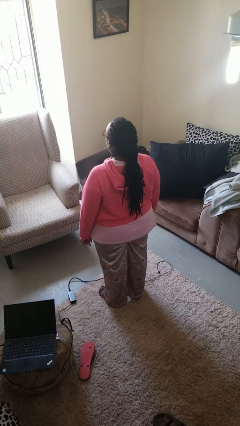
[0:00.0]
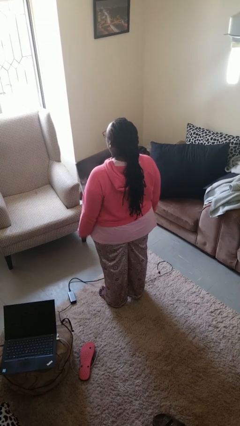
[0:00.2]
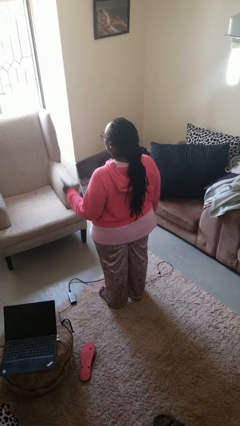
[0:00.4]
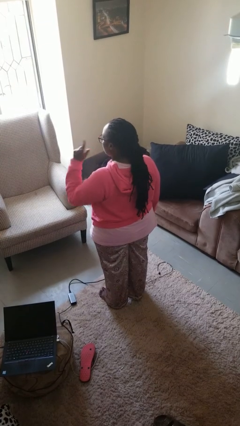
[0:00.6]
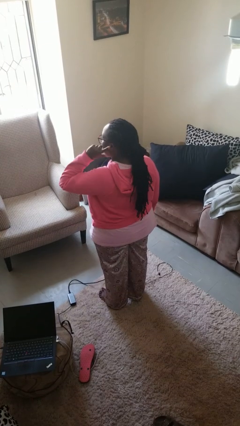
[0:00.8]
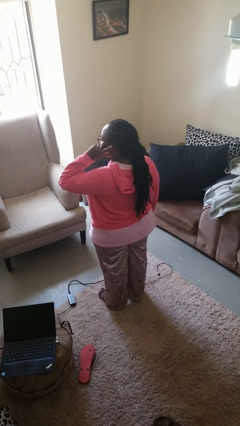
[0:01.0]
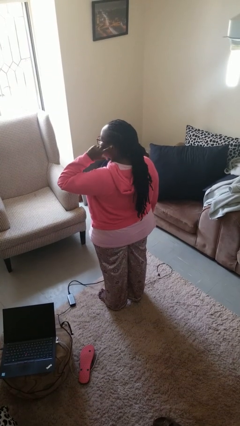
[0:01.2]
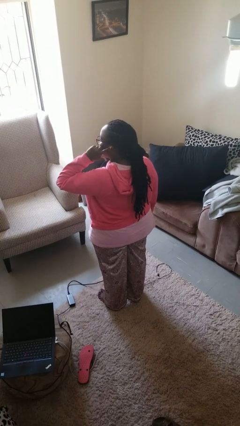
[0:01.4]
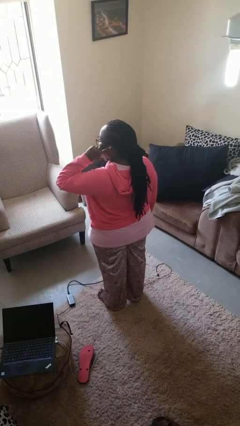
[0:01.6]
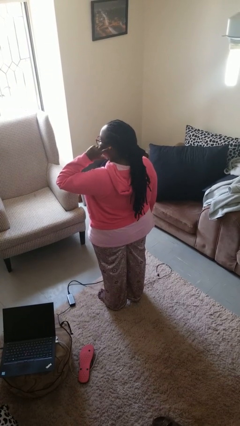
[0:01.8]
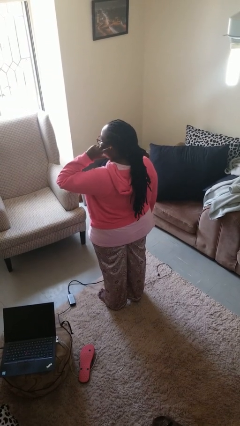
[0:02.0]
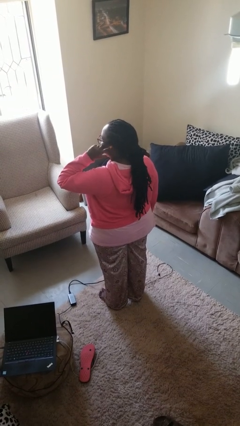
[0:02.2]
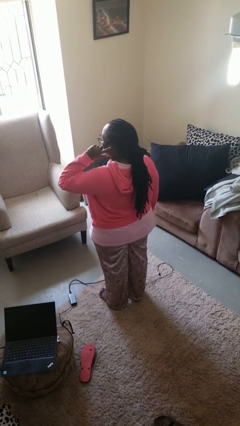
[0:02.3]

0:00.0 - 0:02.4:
person gestures listen closely

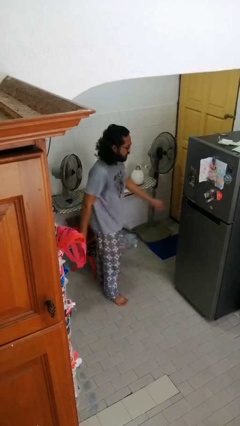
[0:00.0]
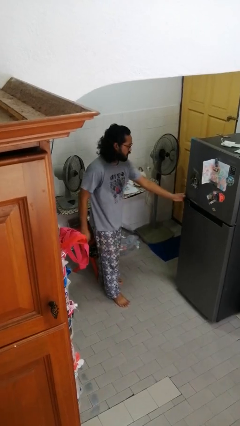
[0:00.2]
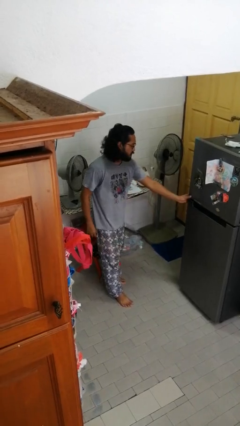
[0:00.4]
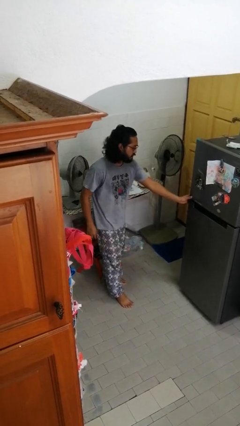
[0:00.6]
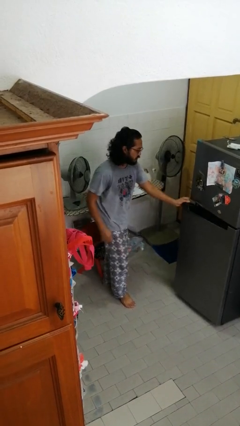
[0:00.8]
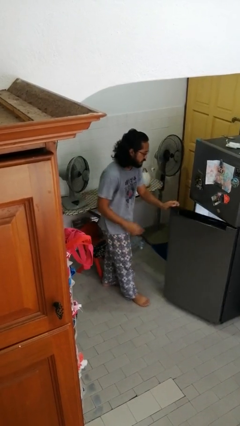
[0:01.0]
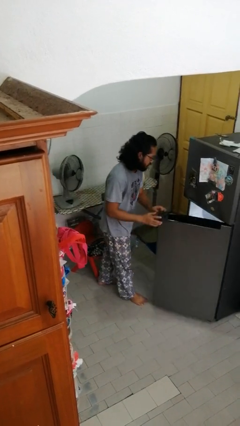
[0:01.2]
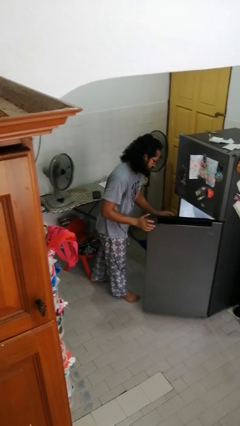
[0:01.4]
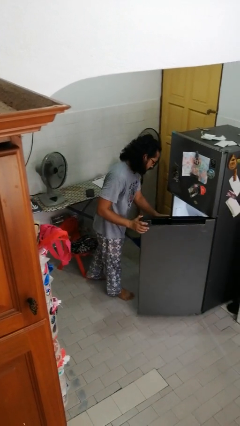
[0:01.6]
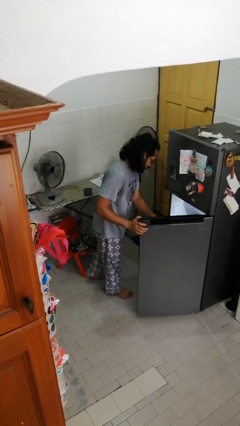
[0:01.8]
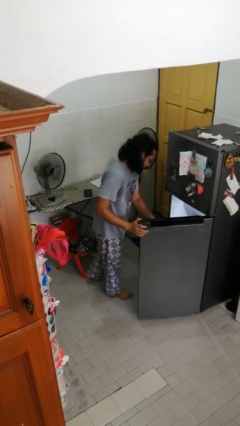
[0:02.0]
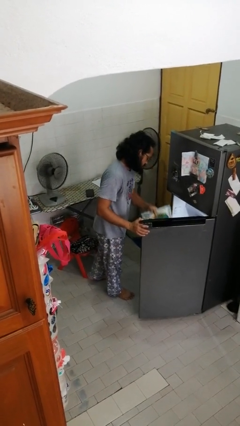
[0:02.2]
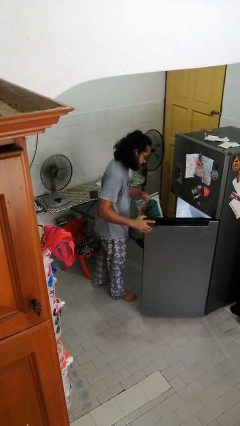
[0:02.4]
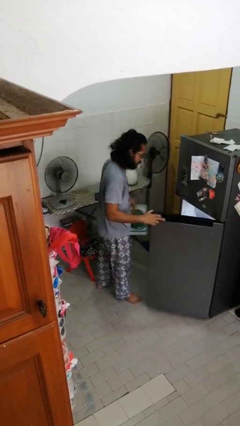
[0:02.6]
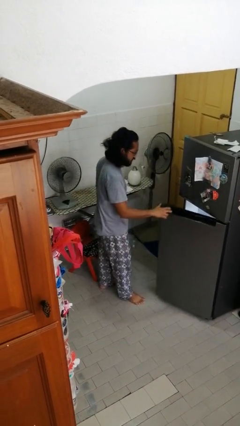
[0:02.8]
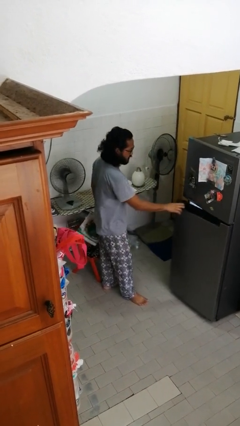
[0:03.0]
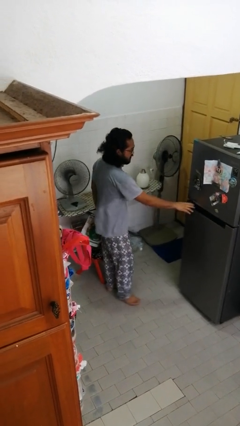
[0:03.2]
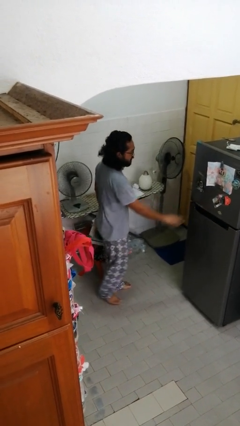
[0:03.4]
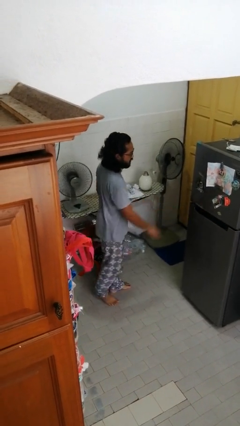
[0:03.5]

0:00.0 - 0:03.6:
person takes object from refrigerator

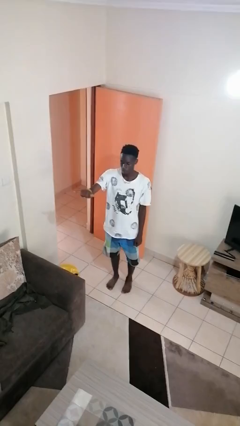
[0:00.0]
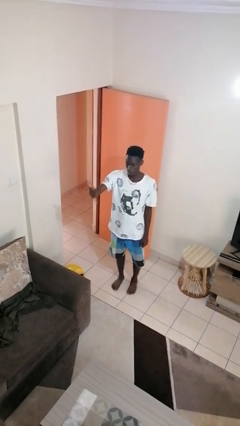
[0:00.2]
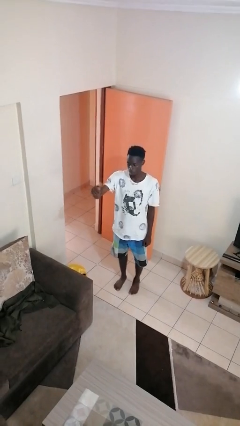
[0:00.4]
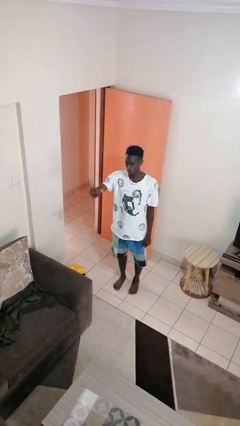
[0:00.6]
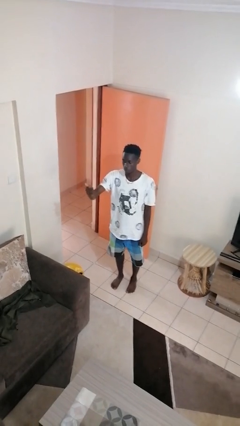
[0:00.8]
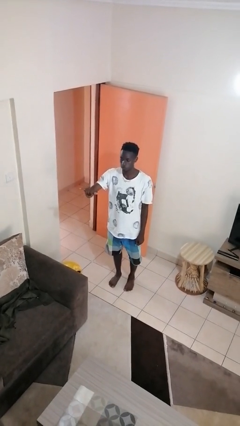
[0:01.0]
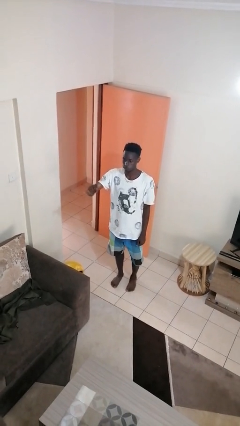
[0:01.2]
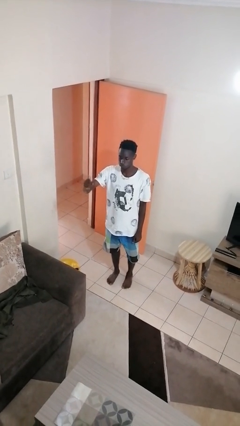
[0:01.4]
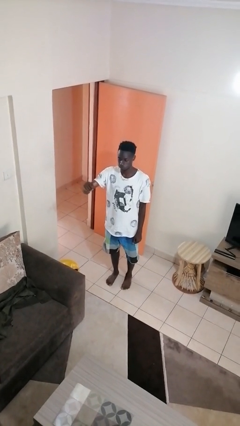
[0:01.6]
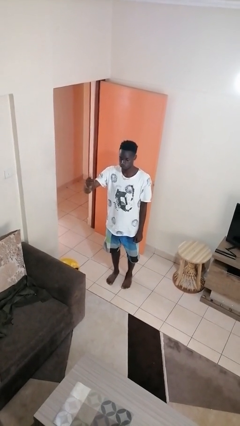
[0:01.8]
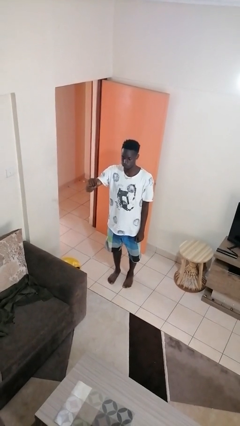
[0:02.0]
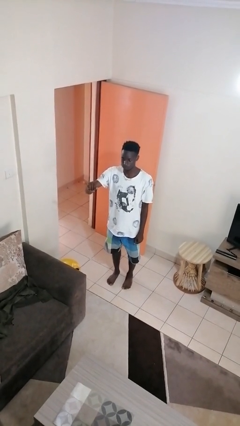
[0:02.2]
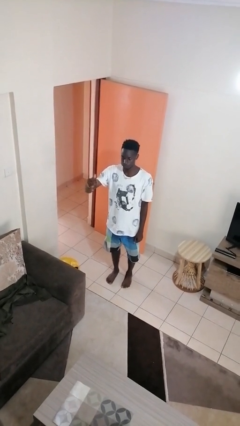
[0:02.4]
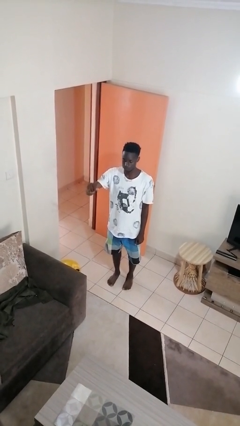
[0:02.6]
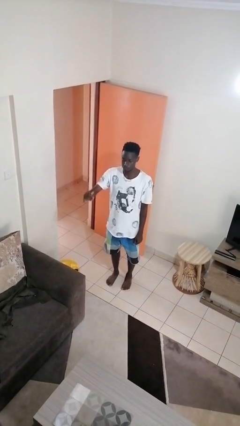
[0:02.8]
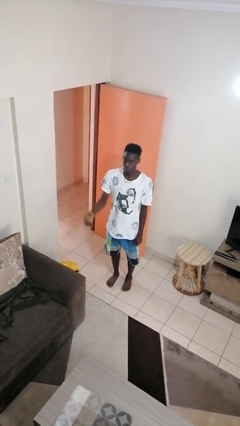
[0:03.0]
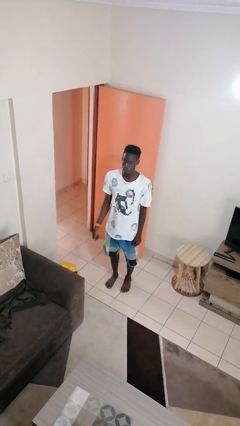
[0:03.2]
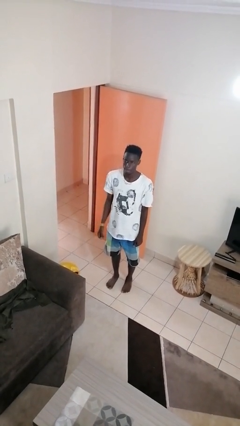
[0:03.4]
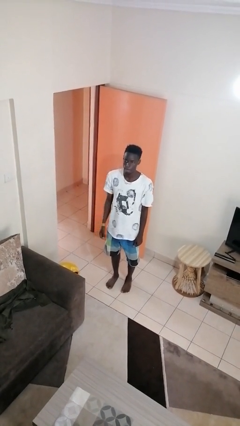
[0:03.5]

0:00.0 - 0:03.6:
person gestures hang loose

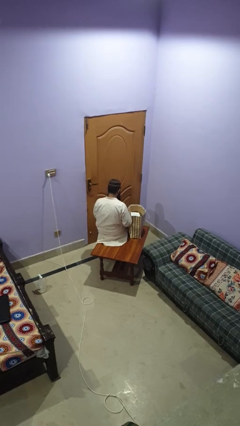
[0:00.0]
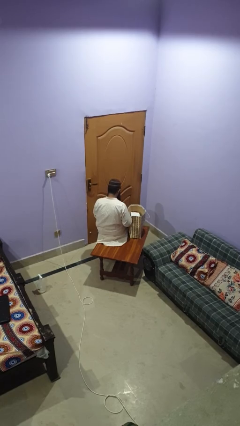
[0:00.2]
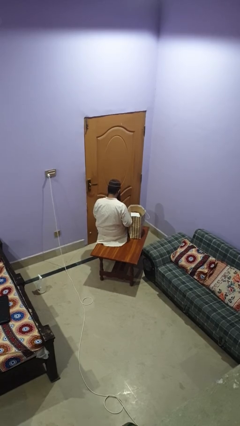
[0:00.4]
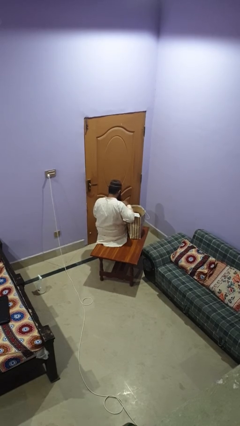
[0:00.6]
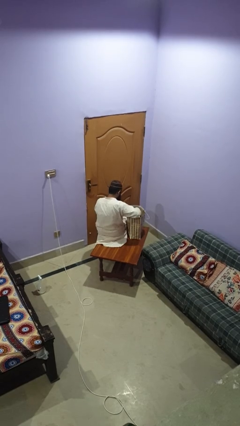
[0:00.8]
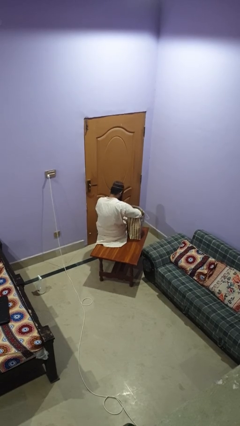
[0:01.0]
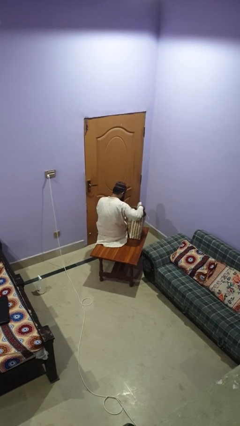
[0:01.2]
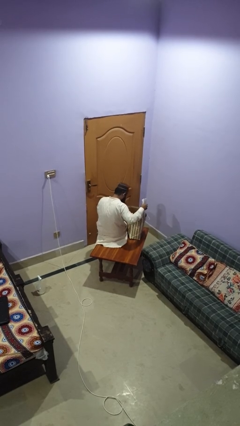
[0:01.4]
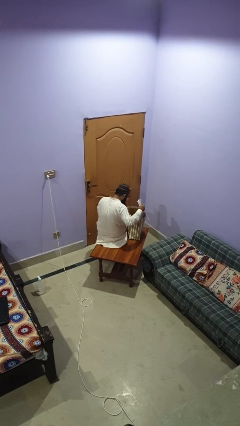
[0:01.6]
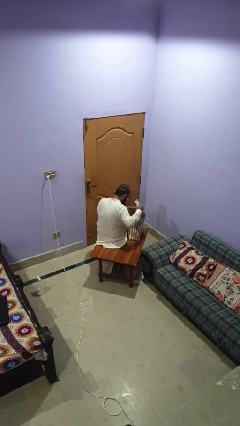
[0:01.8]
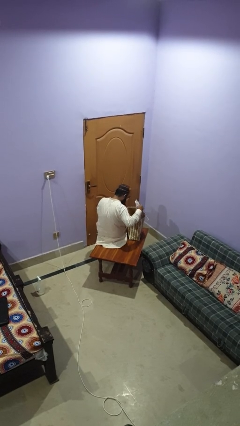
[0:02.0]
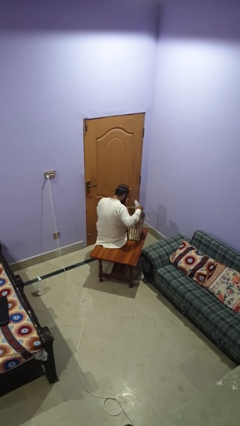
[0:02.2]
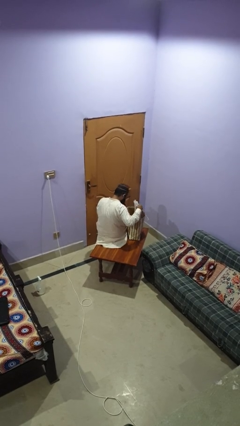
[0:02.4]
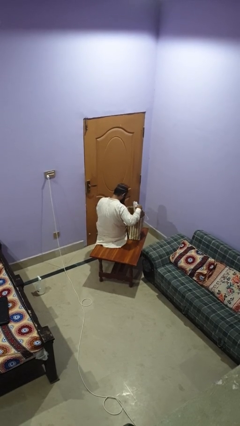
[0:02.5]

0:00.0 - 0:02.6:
person searches in bag

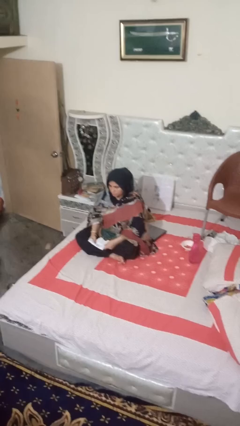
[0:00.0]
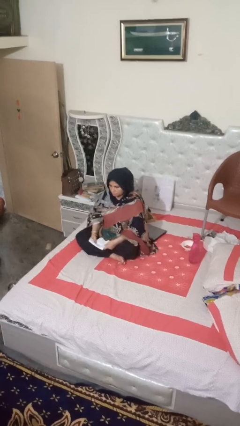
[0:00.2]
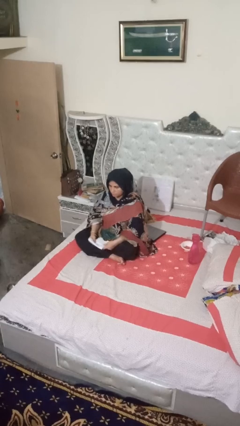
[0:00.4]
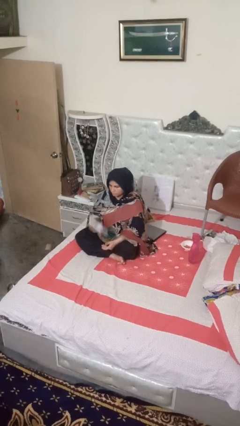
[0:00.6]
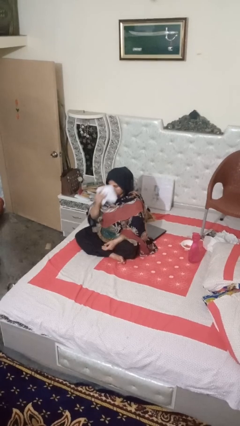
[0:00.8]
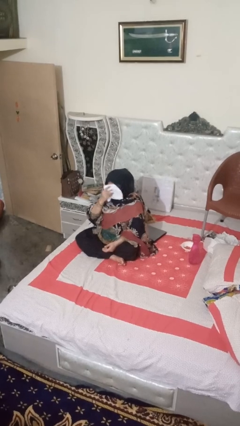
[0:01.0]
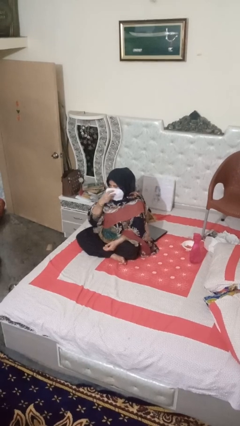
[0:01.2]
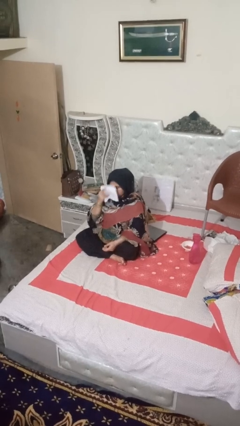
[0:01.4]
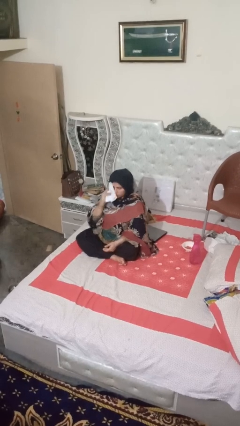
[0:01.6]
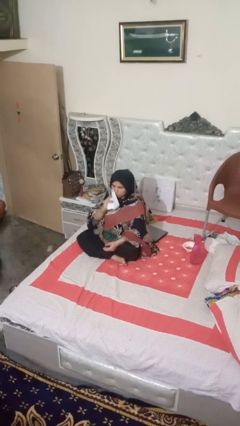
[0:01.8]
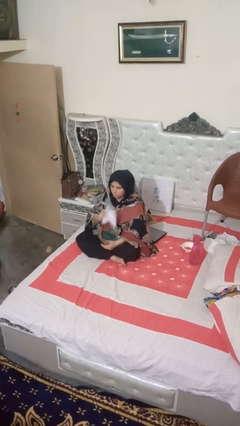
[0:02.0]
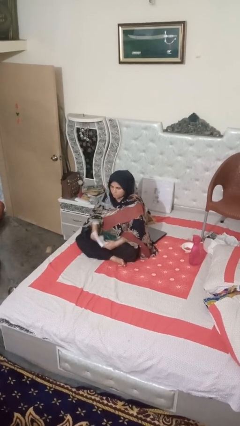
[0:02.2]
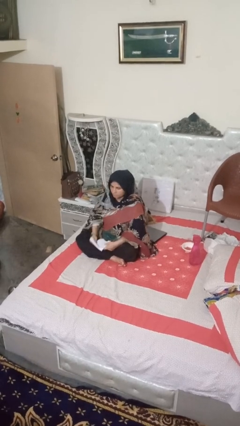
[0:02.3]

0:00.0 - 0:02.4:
person wipes mouth with napkin

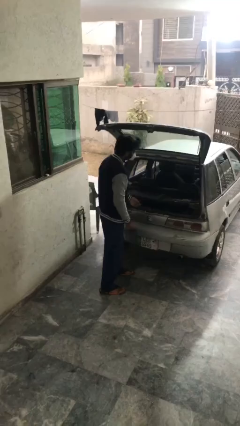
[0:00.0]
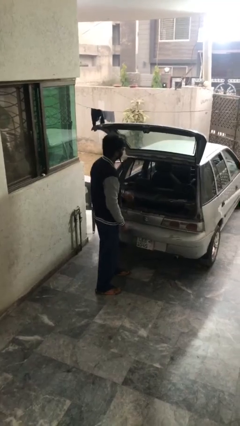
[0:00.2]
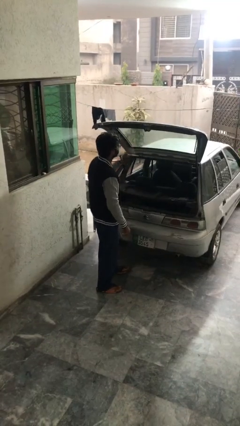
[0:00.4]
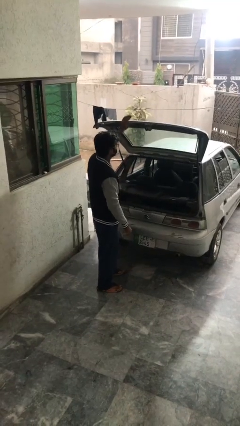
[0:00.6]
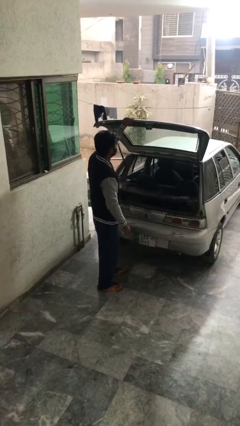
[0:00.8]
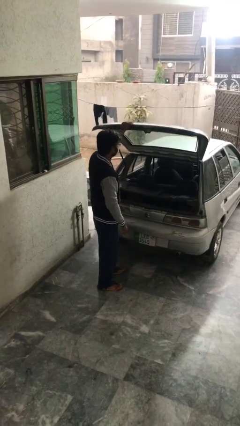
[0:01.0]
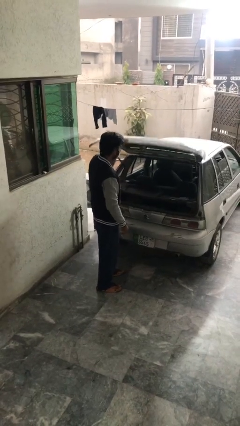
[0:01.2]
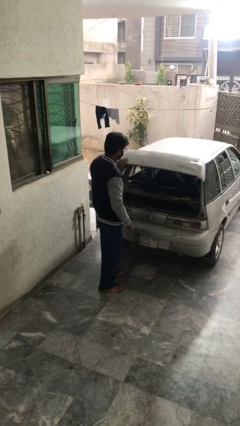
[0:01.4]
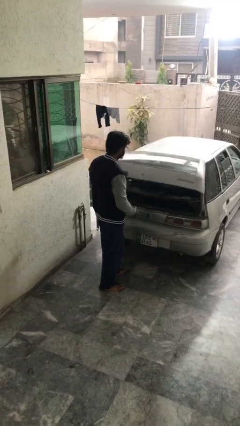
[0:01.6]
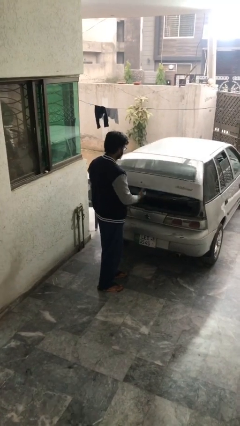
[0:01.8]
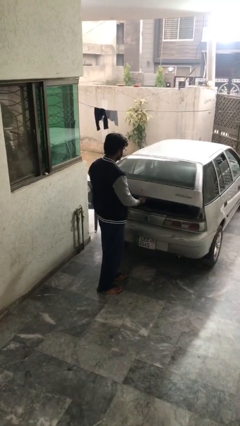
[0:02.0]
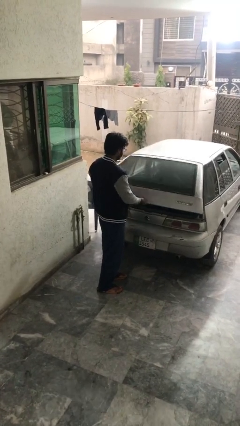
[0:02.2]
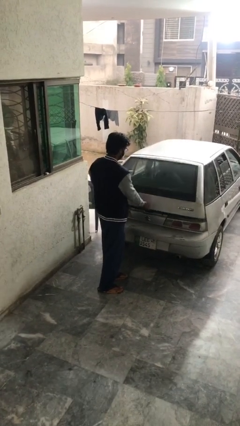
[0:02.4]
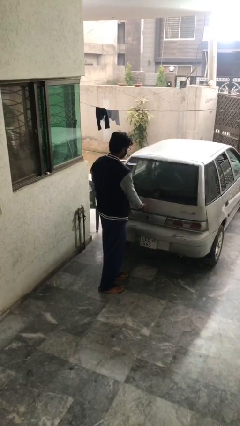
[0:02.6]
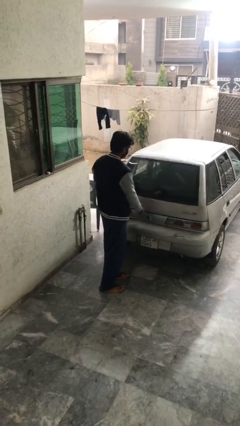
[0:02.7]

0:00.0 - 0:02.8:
person closes car trunk

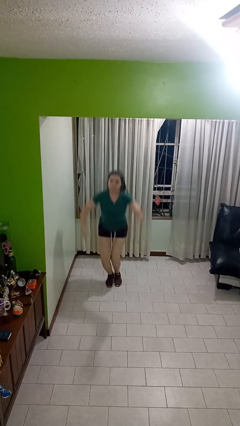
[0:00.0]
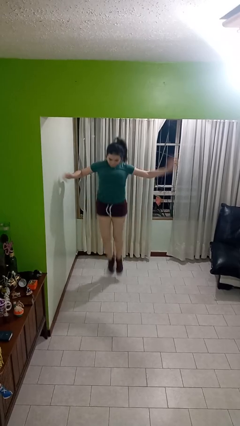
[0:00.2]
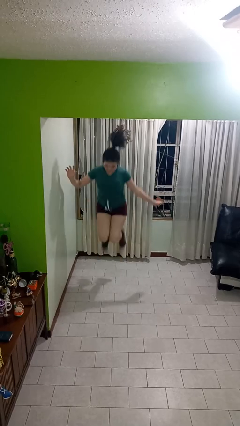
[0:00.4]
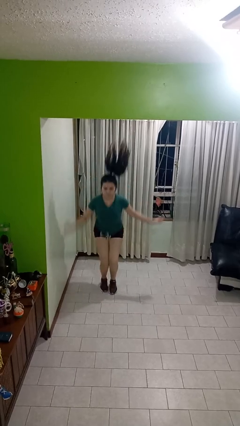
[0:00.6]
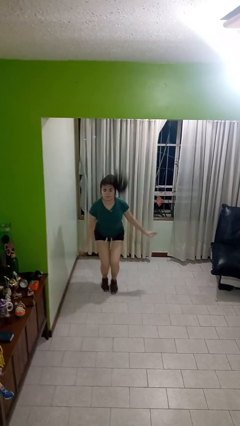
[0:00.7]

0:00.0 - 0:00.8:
person jumps
